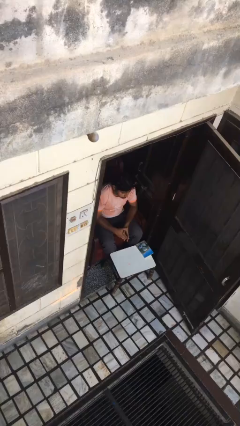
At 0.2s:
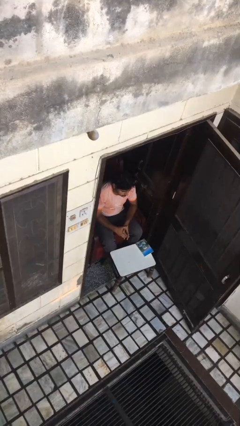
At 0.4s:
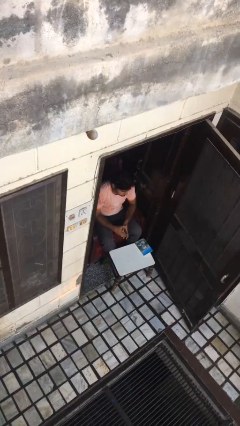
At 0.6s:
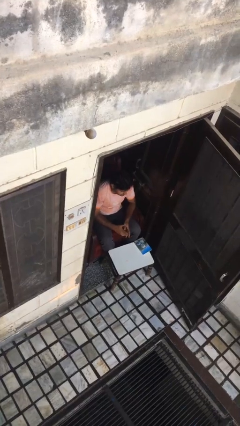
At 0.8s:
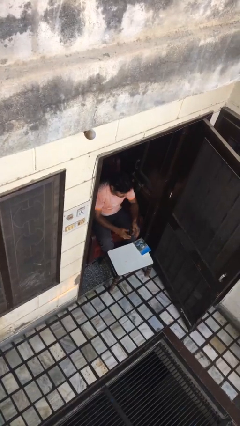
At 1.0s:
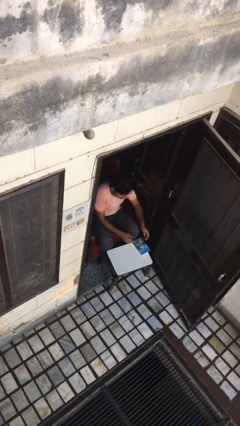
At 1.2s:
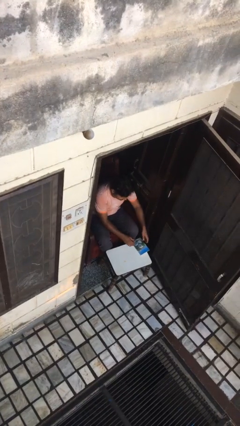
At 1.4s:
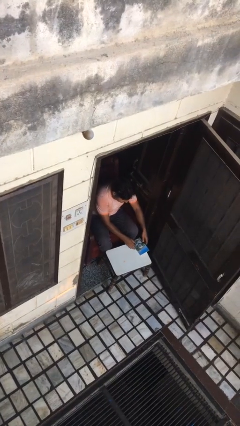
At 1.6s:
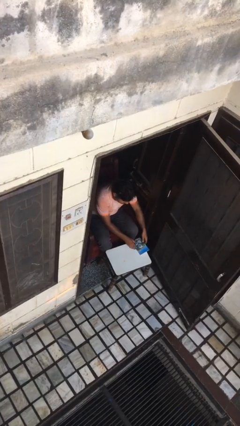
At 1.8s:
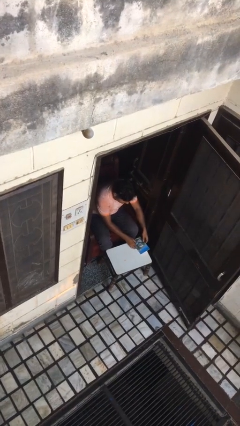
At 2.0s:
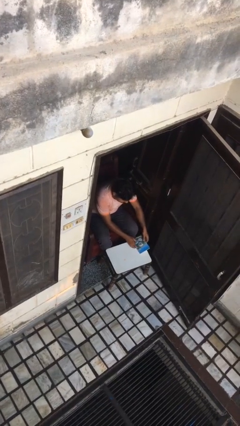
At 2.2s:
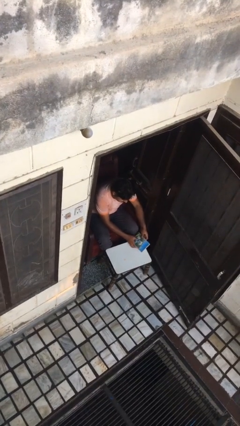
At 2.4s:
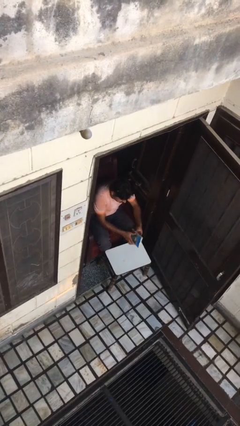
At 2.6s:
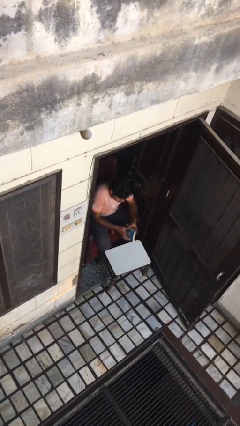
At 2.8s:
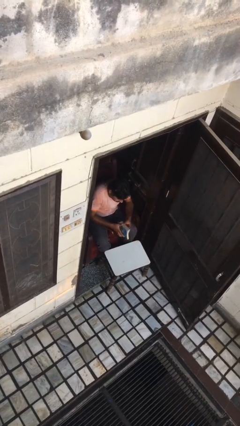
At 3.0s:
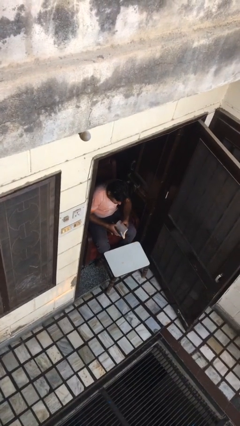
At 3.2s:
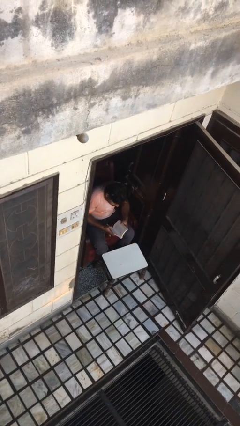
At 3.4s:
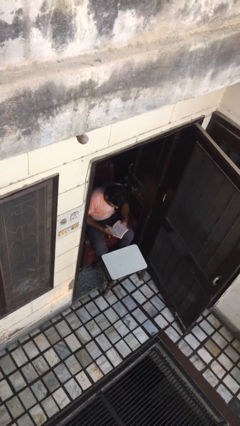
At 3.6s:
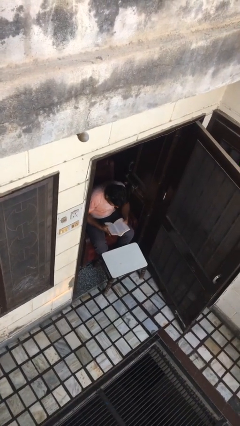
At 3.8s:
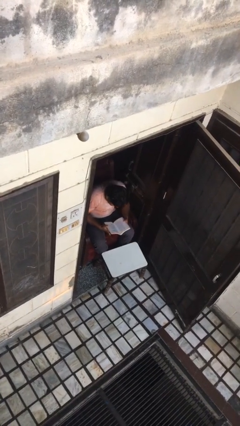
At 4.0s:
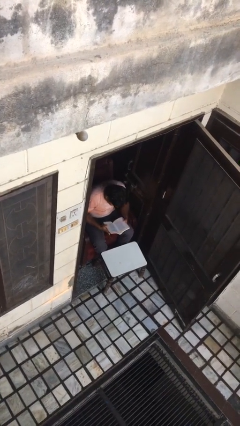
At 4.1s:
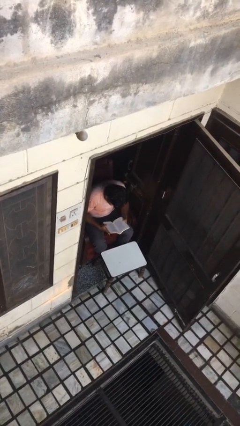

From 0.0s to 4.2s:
person picks up object from table

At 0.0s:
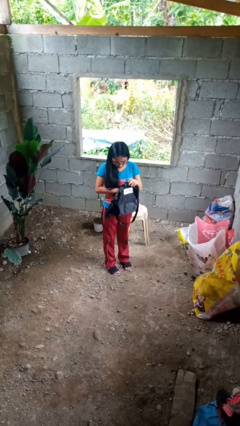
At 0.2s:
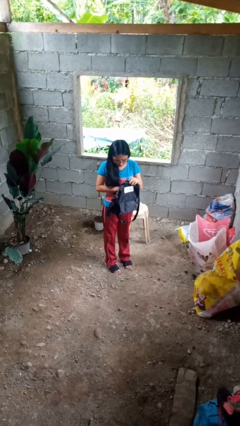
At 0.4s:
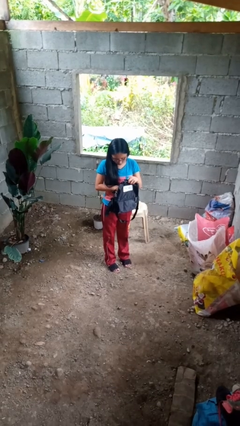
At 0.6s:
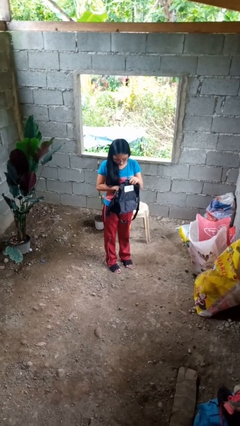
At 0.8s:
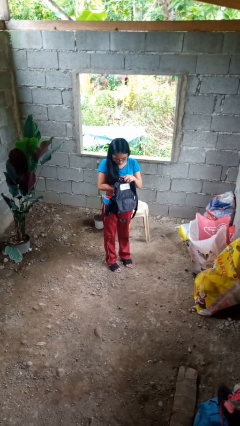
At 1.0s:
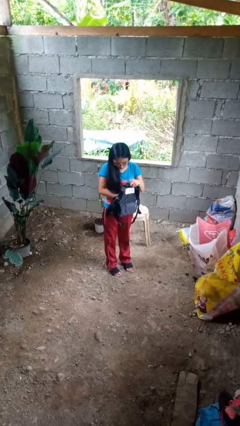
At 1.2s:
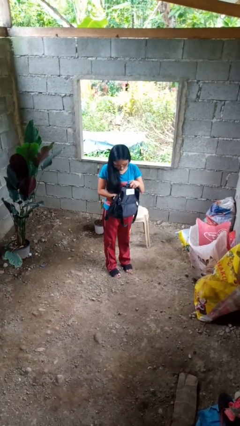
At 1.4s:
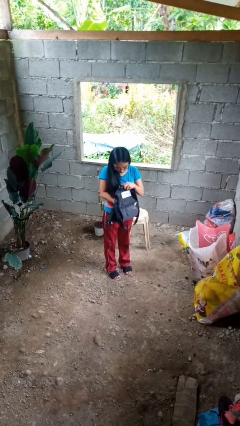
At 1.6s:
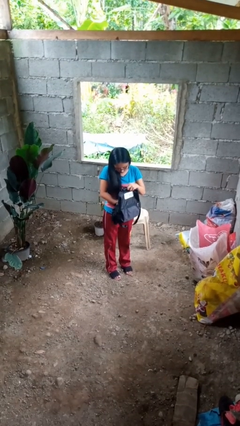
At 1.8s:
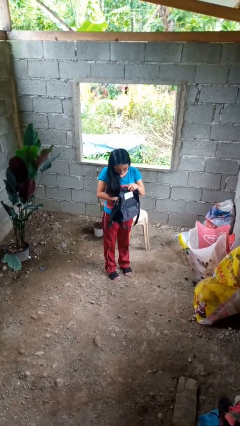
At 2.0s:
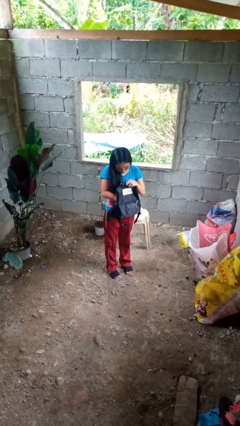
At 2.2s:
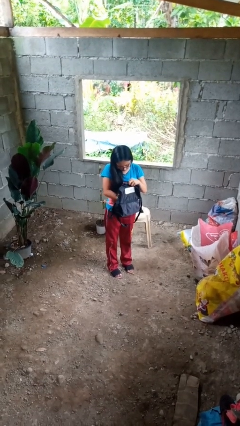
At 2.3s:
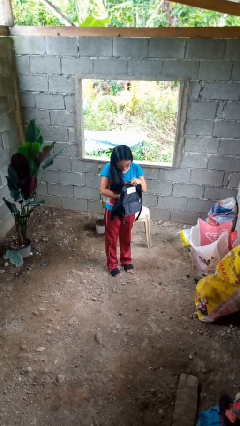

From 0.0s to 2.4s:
person searches in backpack

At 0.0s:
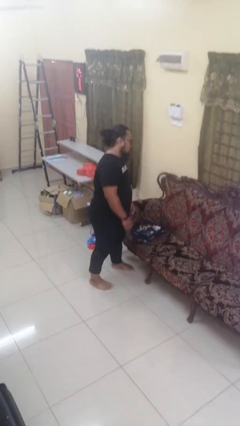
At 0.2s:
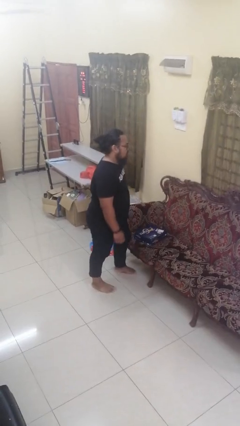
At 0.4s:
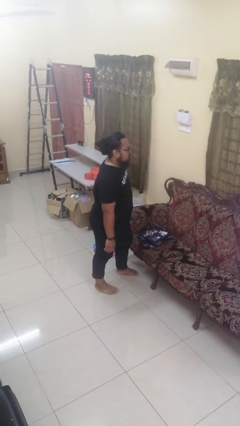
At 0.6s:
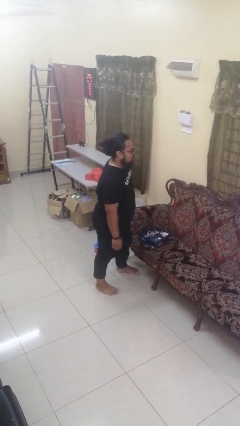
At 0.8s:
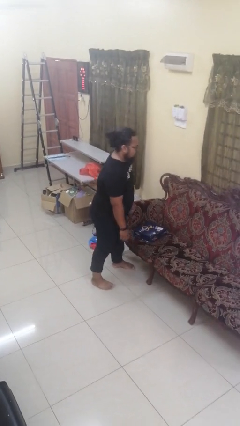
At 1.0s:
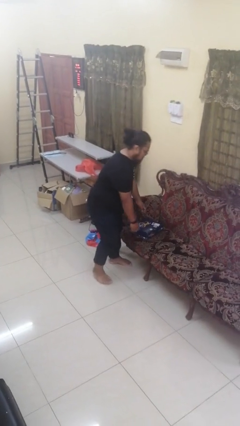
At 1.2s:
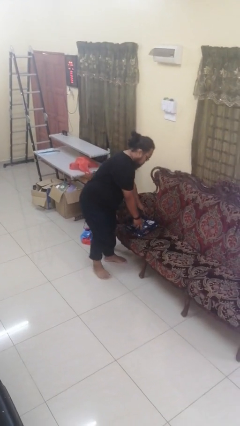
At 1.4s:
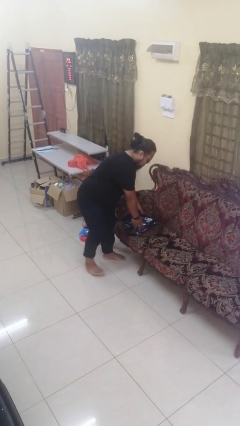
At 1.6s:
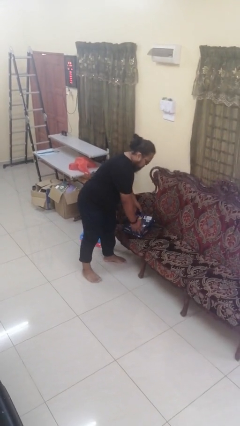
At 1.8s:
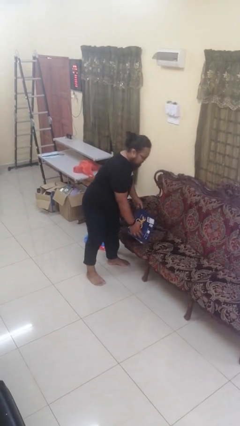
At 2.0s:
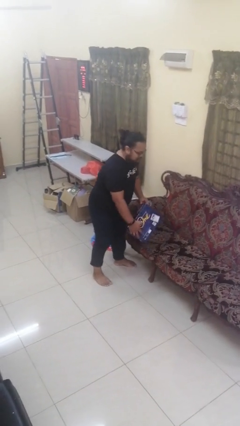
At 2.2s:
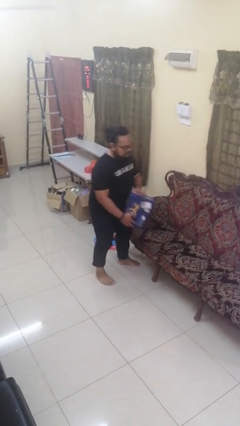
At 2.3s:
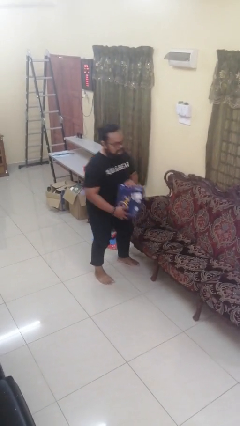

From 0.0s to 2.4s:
person picks up object from couch

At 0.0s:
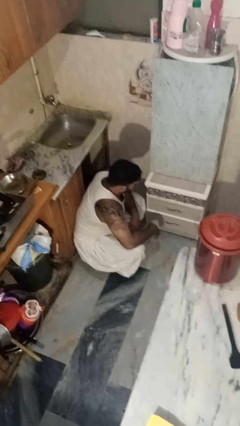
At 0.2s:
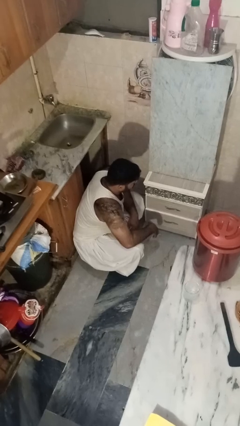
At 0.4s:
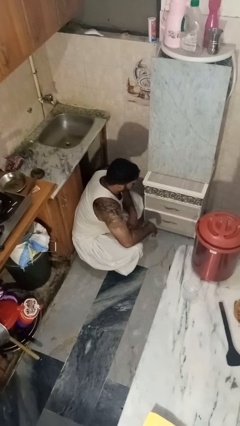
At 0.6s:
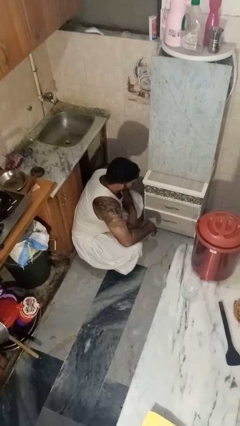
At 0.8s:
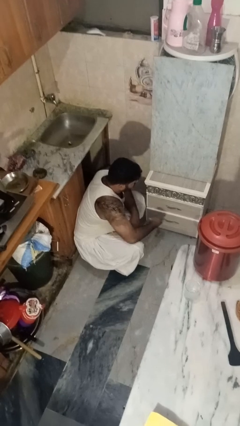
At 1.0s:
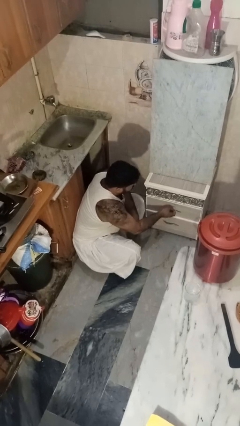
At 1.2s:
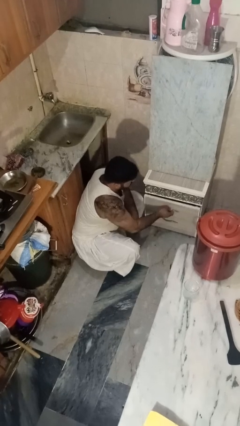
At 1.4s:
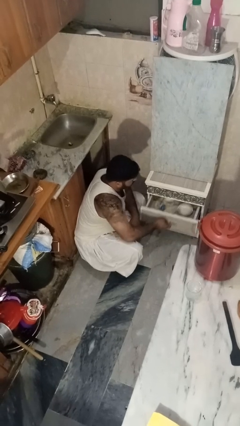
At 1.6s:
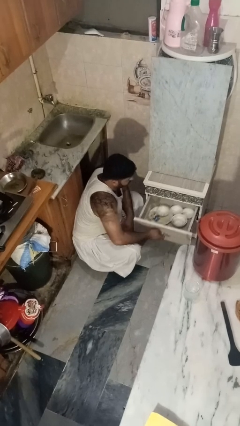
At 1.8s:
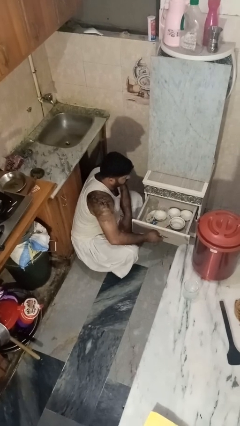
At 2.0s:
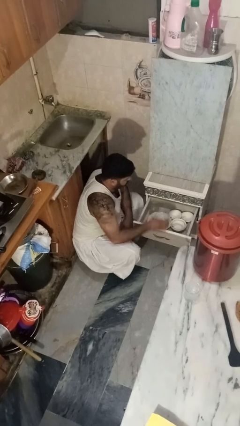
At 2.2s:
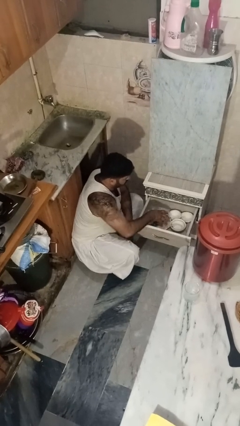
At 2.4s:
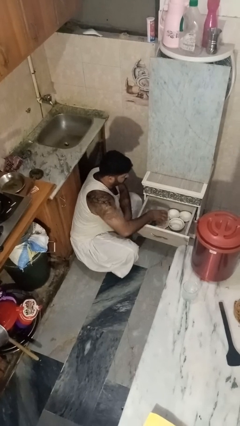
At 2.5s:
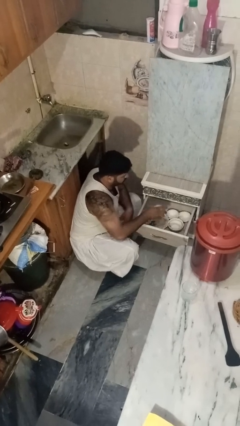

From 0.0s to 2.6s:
person takes object from kitchen drawer

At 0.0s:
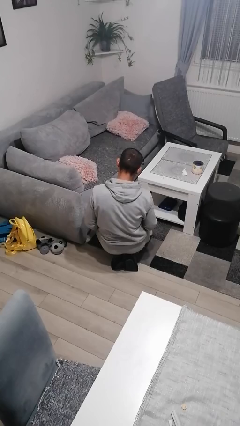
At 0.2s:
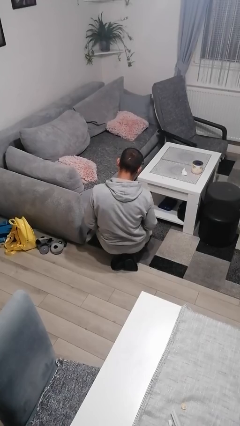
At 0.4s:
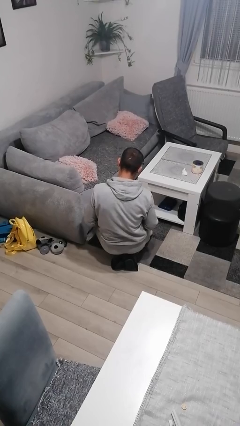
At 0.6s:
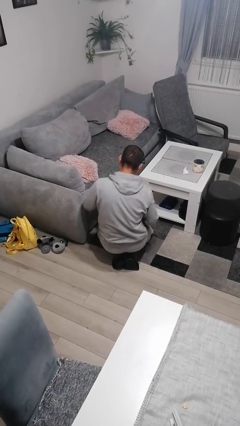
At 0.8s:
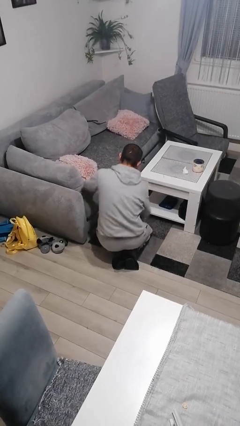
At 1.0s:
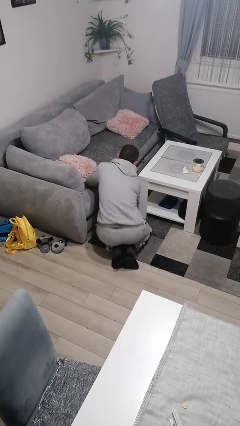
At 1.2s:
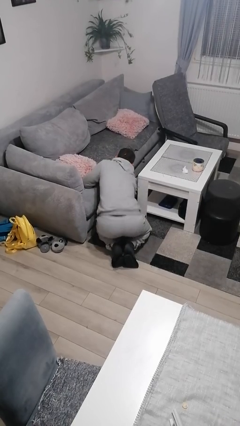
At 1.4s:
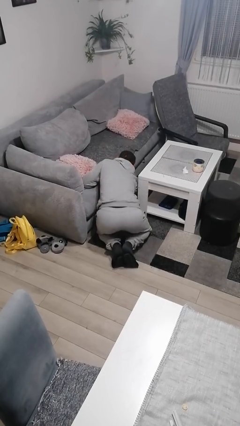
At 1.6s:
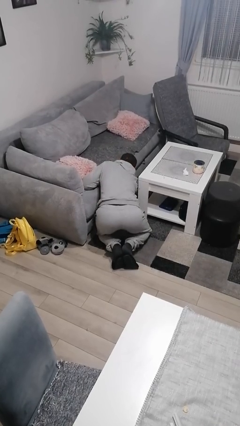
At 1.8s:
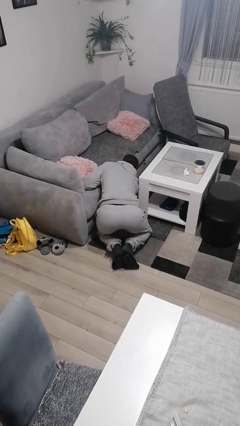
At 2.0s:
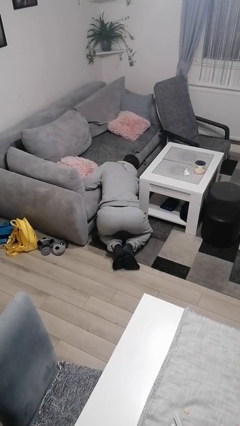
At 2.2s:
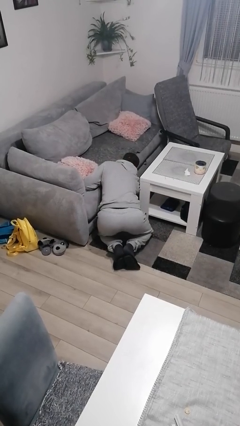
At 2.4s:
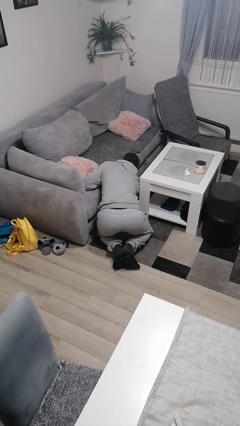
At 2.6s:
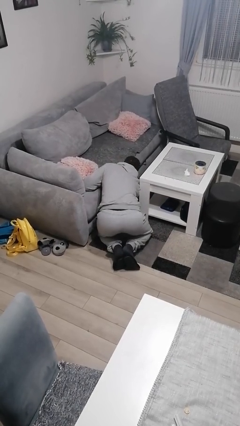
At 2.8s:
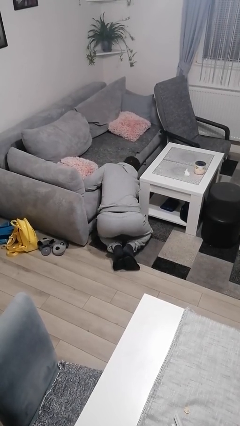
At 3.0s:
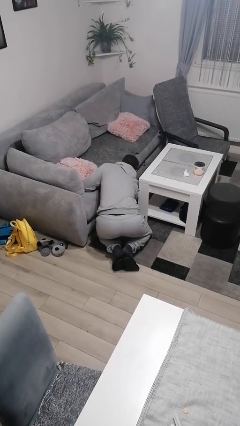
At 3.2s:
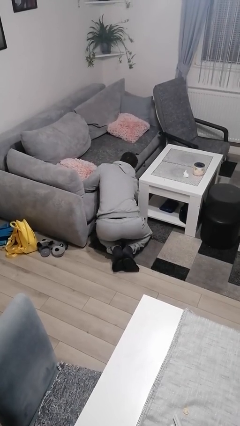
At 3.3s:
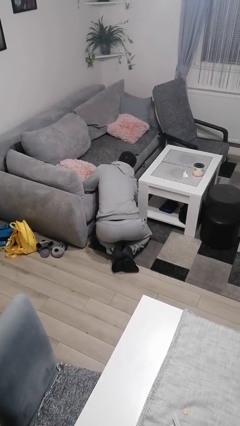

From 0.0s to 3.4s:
person searches under couch

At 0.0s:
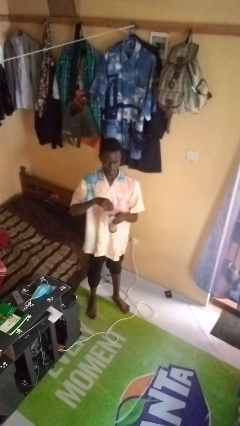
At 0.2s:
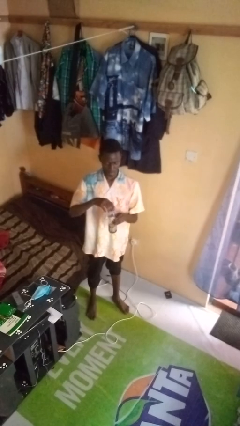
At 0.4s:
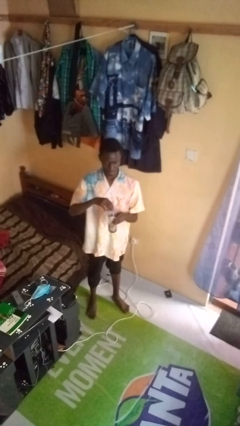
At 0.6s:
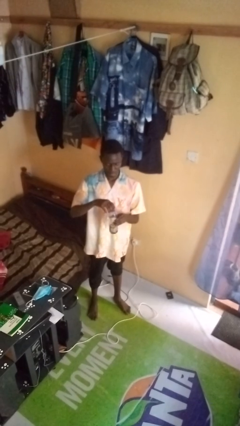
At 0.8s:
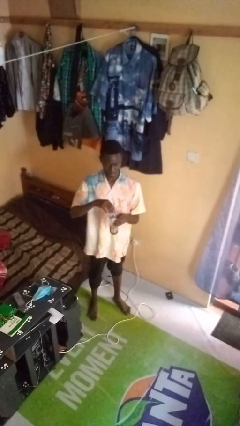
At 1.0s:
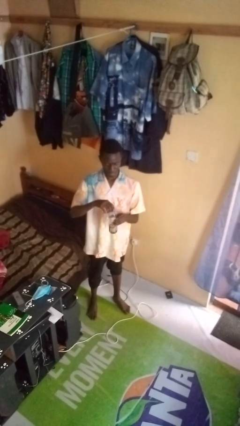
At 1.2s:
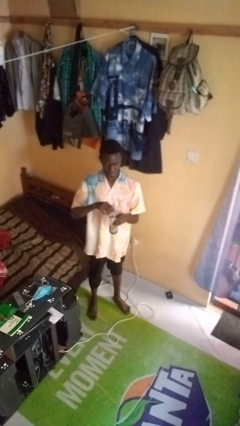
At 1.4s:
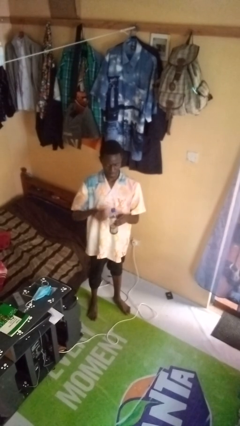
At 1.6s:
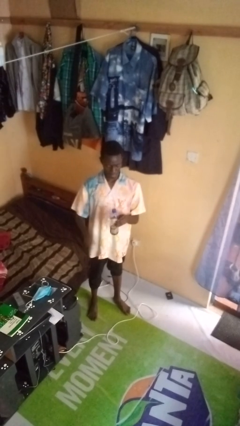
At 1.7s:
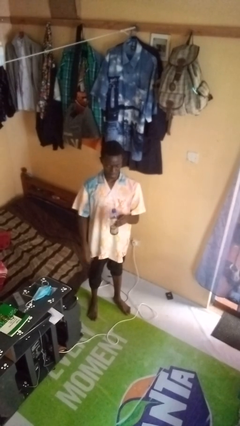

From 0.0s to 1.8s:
person screws lid to bottle

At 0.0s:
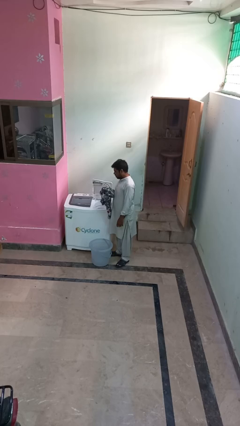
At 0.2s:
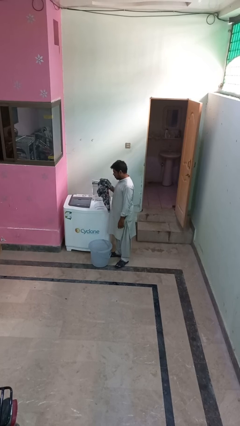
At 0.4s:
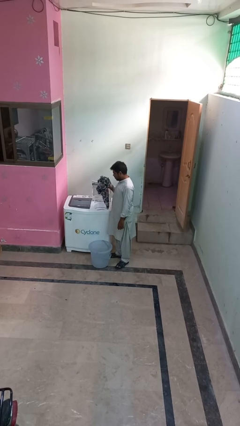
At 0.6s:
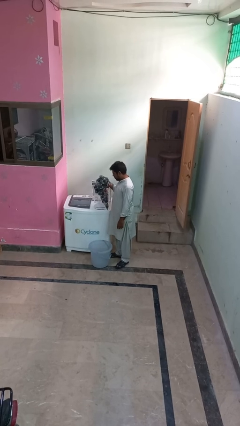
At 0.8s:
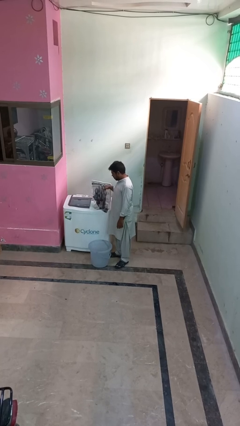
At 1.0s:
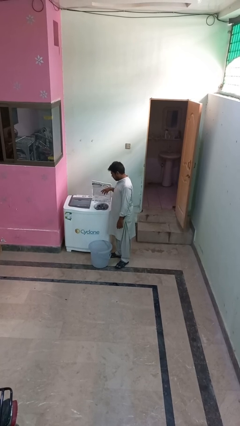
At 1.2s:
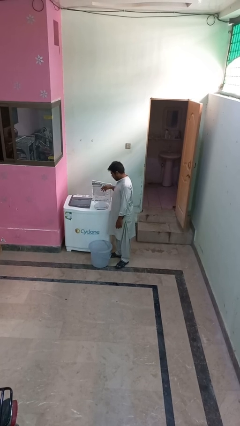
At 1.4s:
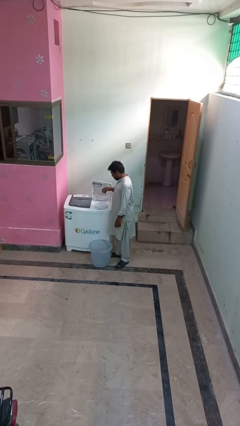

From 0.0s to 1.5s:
person loads dryer
